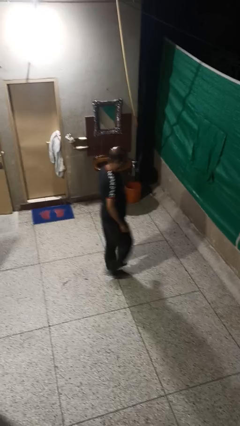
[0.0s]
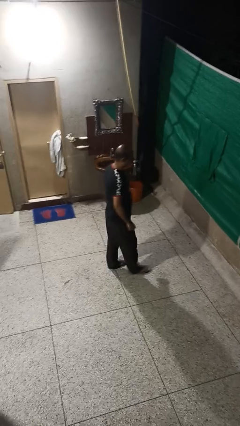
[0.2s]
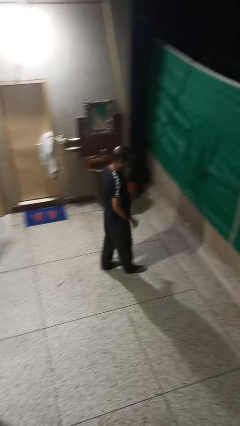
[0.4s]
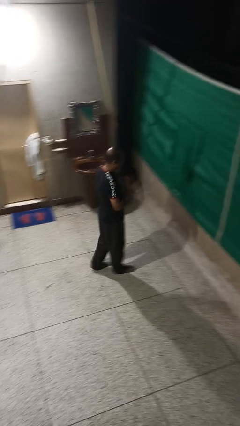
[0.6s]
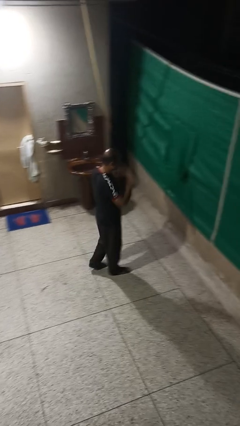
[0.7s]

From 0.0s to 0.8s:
person rubs eyes

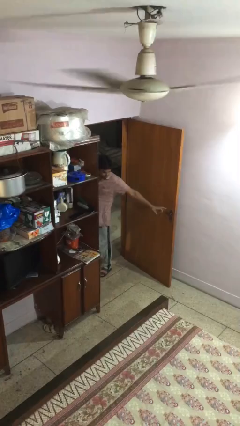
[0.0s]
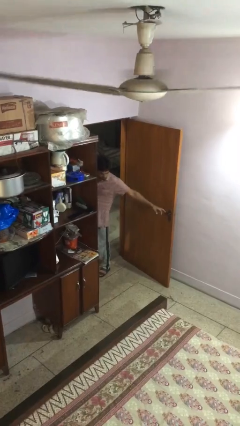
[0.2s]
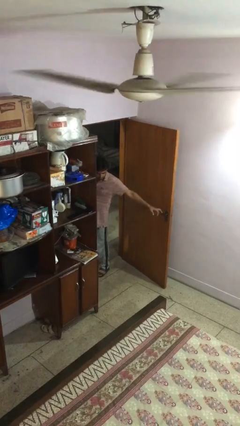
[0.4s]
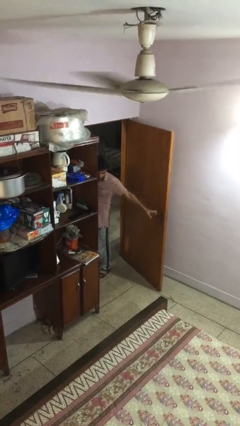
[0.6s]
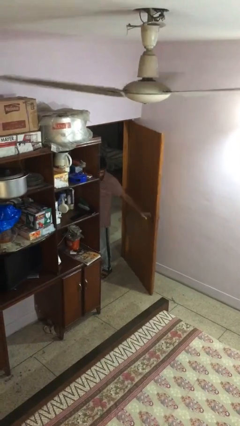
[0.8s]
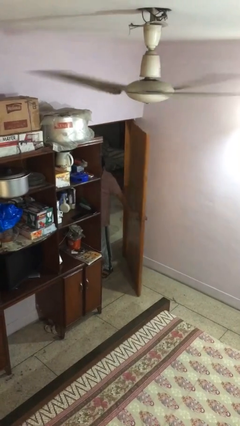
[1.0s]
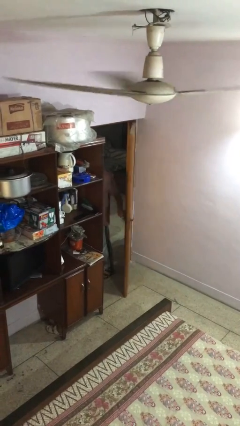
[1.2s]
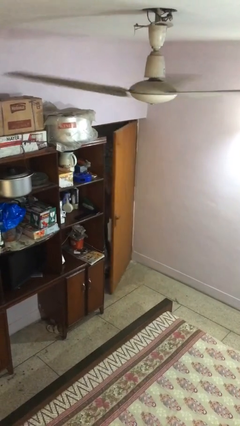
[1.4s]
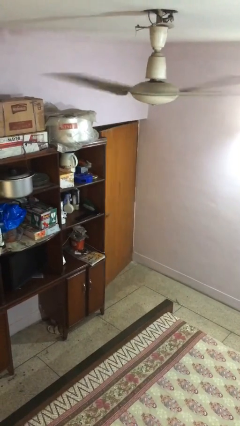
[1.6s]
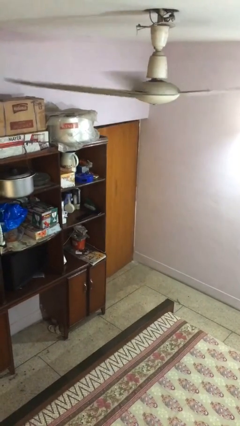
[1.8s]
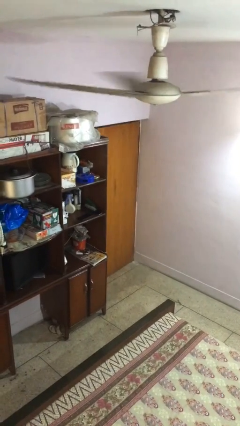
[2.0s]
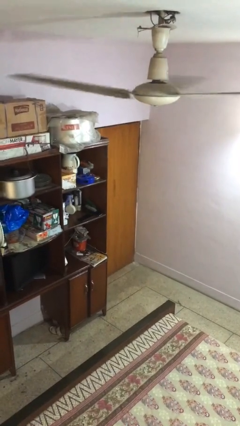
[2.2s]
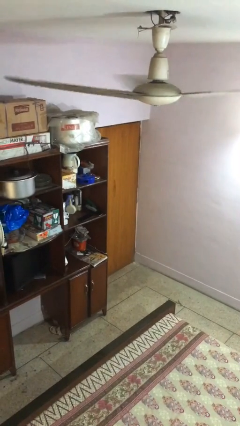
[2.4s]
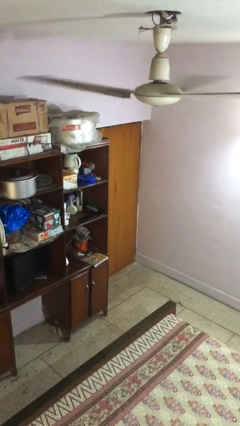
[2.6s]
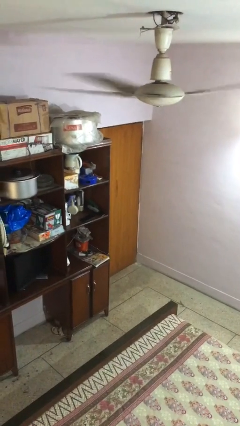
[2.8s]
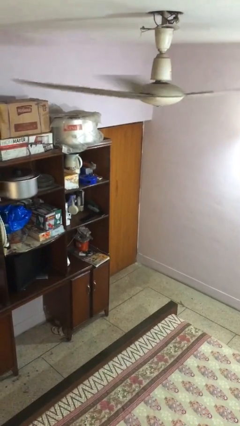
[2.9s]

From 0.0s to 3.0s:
person closes facility door

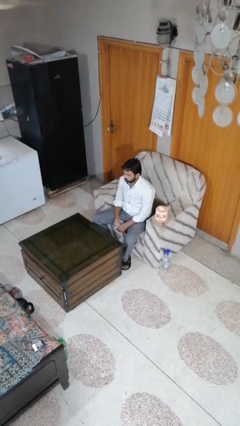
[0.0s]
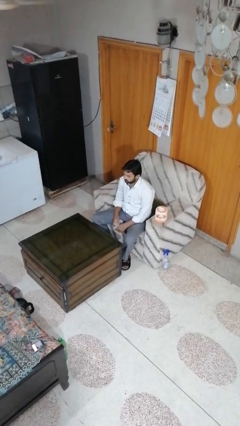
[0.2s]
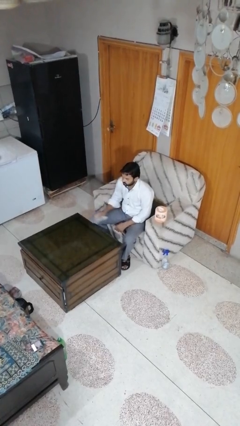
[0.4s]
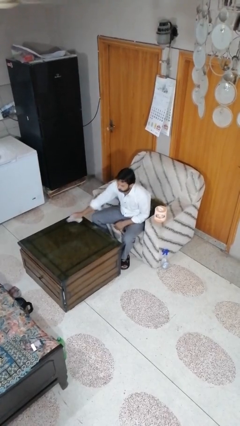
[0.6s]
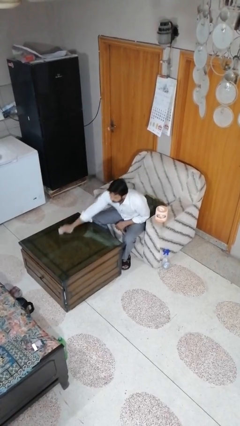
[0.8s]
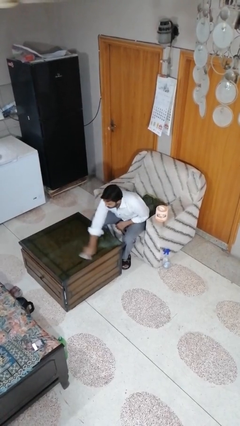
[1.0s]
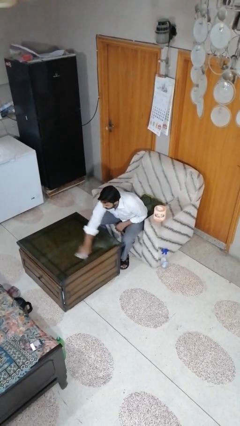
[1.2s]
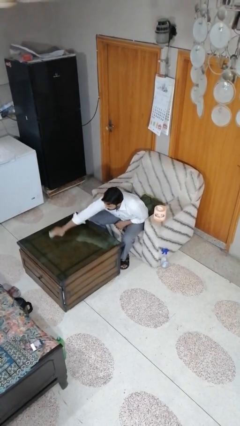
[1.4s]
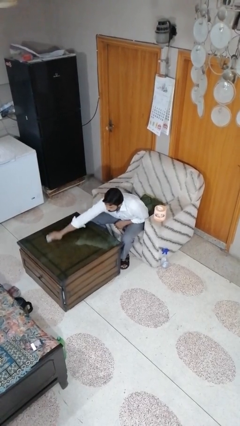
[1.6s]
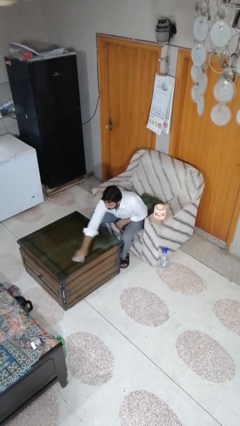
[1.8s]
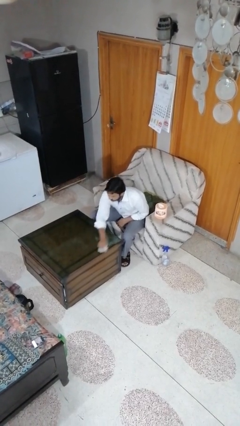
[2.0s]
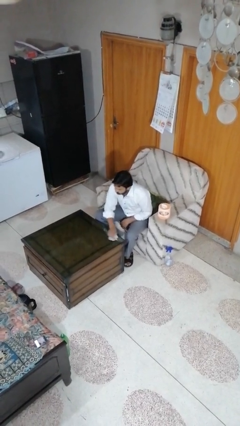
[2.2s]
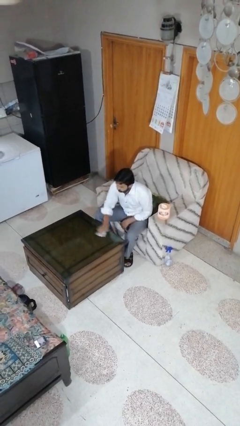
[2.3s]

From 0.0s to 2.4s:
person cleans table with rag

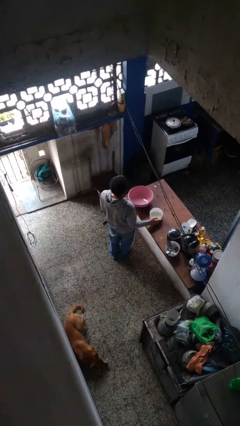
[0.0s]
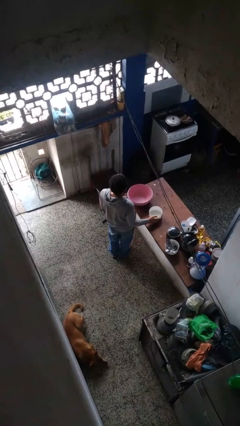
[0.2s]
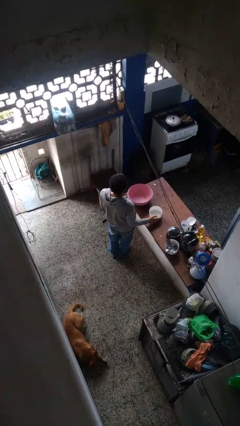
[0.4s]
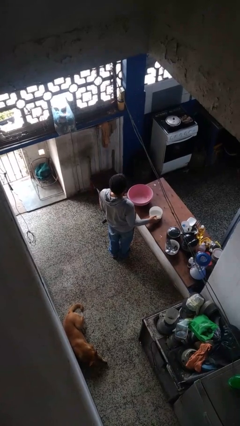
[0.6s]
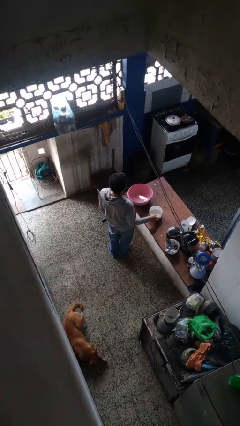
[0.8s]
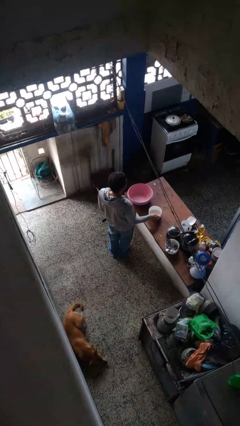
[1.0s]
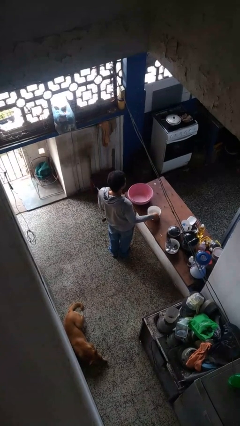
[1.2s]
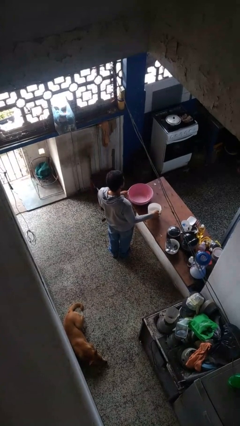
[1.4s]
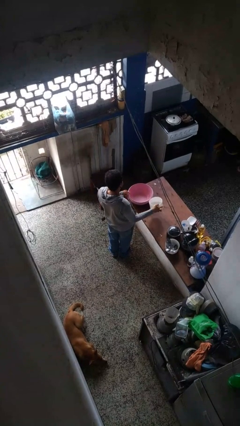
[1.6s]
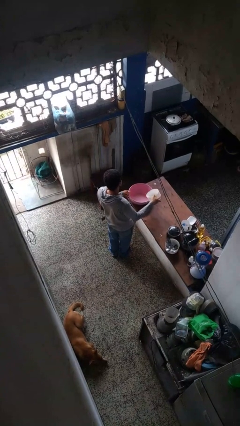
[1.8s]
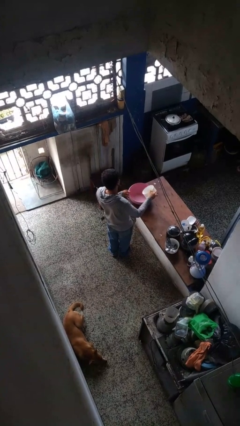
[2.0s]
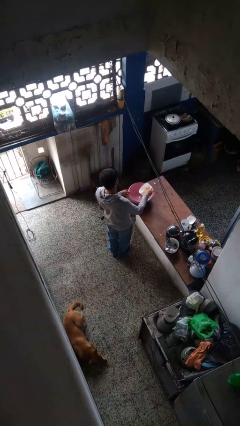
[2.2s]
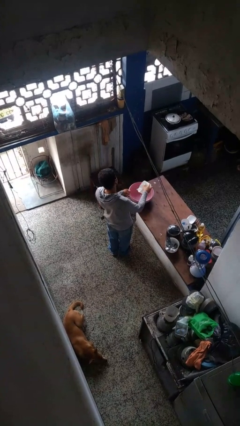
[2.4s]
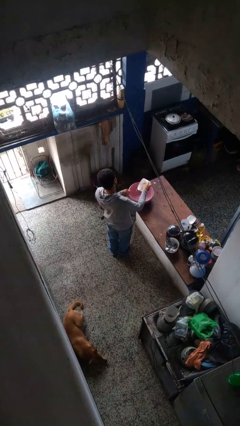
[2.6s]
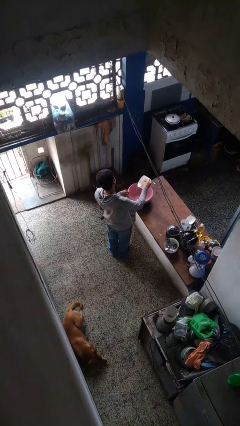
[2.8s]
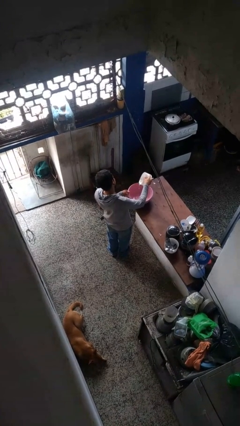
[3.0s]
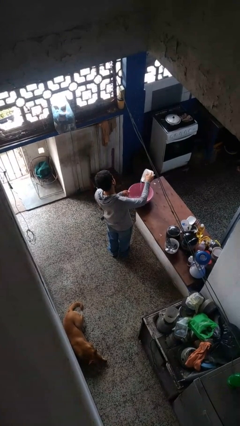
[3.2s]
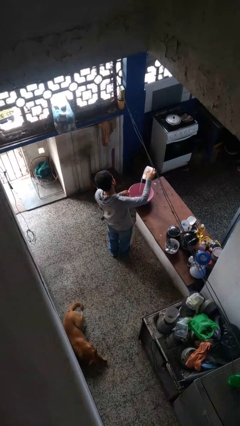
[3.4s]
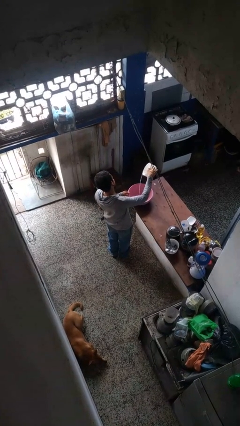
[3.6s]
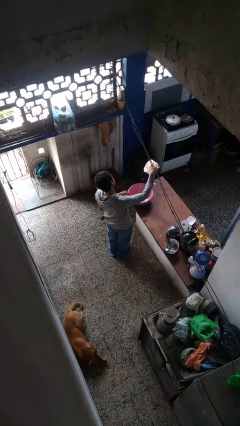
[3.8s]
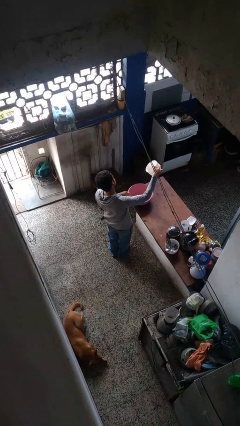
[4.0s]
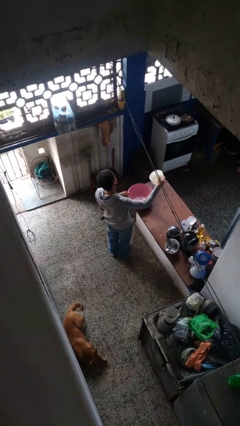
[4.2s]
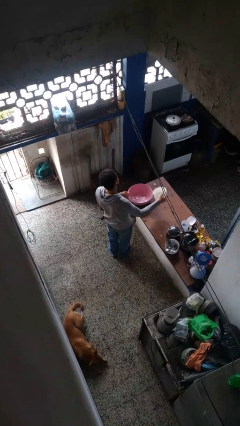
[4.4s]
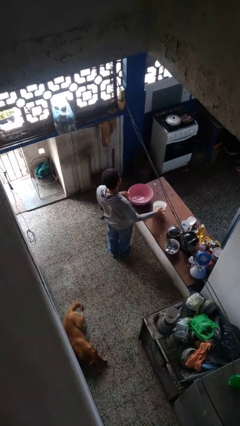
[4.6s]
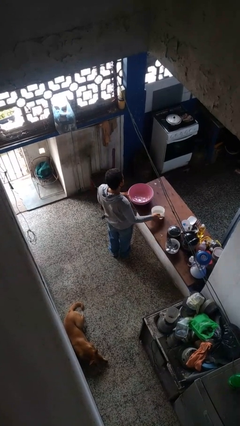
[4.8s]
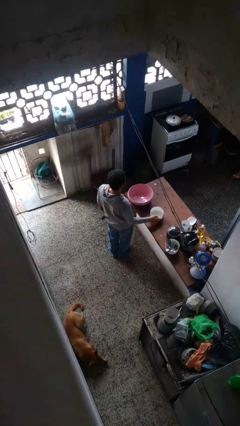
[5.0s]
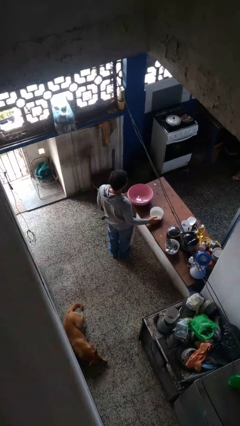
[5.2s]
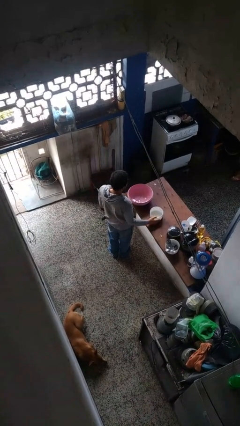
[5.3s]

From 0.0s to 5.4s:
person pours into bowl

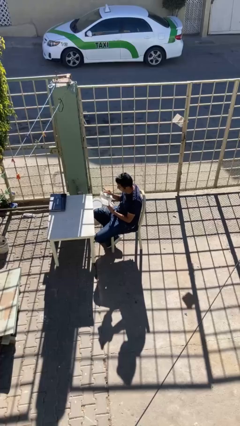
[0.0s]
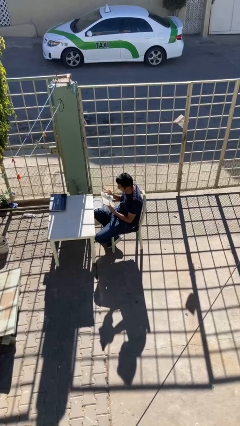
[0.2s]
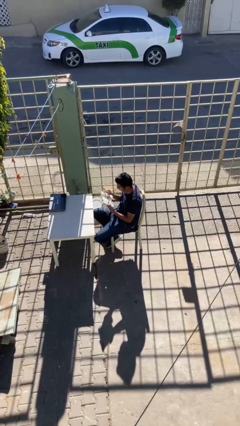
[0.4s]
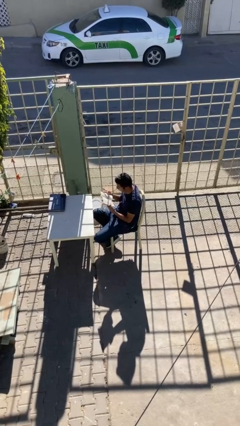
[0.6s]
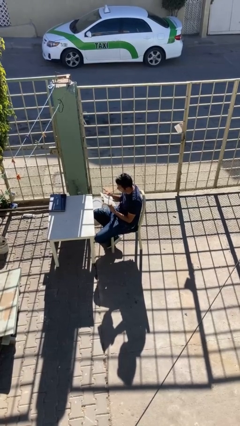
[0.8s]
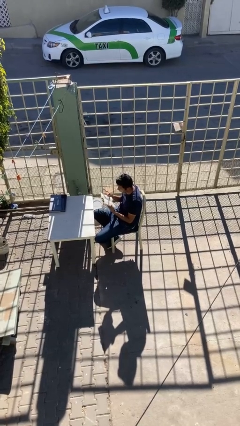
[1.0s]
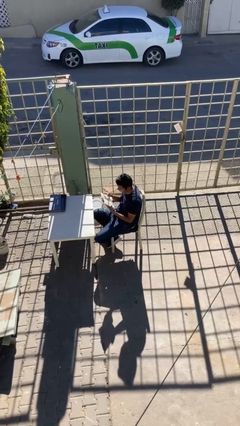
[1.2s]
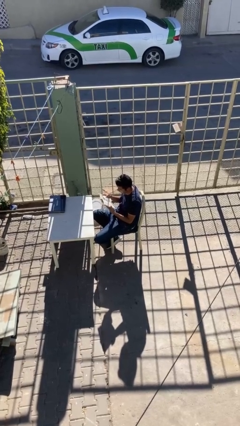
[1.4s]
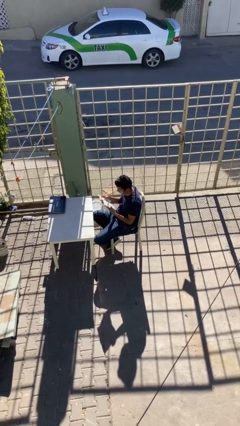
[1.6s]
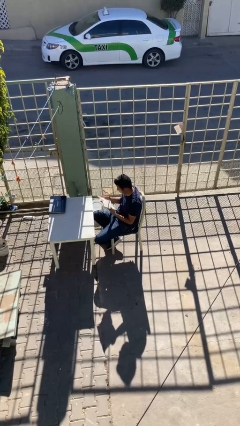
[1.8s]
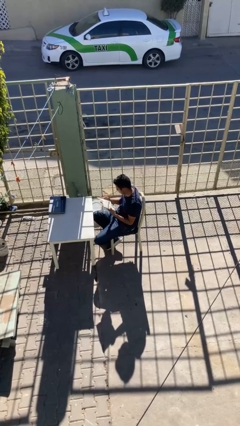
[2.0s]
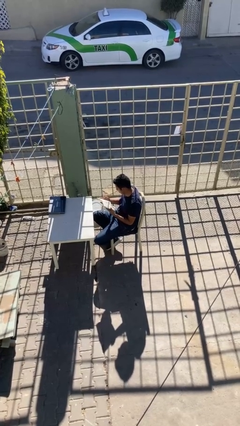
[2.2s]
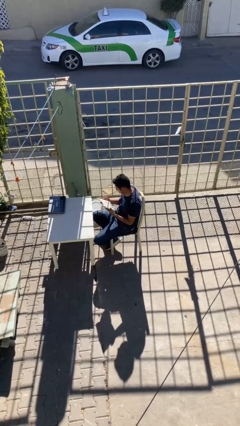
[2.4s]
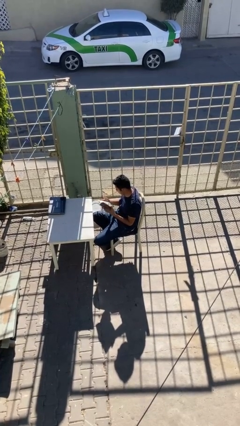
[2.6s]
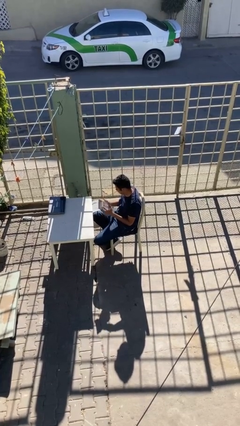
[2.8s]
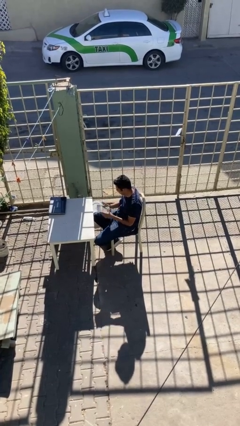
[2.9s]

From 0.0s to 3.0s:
person reads document

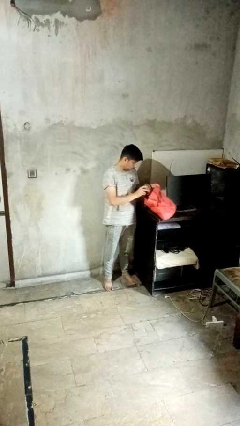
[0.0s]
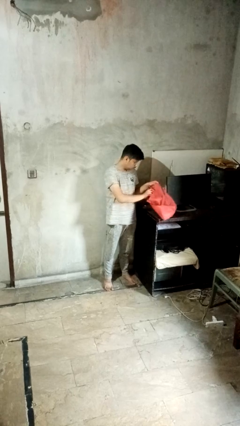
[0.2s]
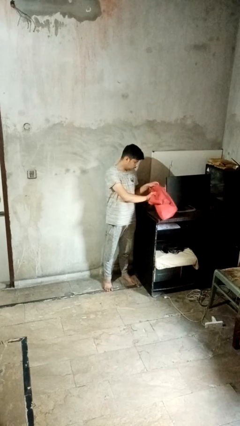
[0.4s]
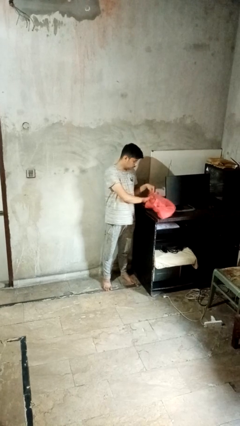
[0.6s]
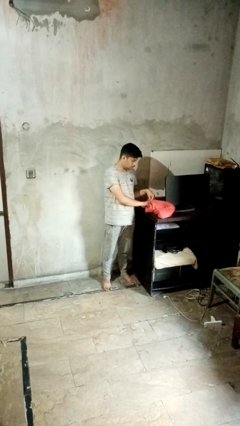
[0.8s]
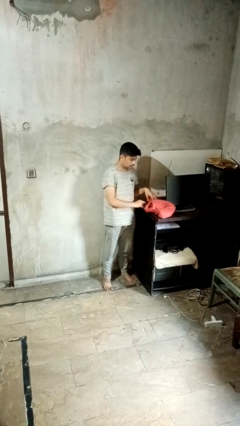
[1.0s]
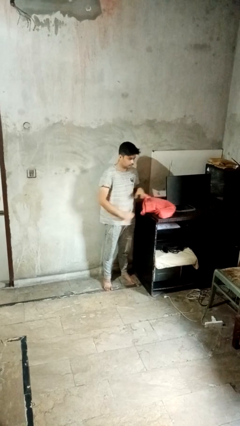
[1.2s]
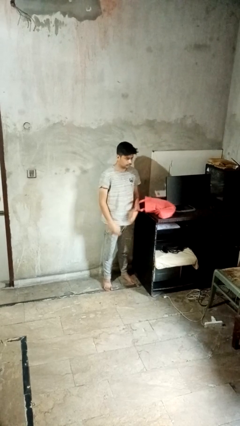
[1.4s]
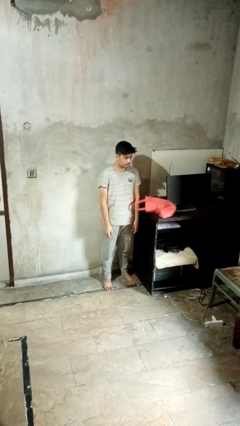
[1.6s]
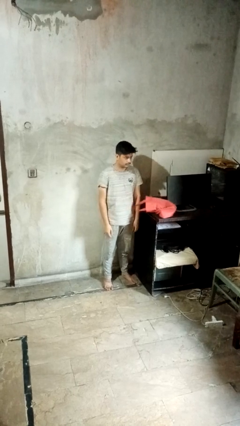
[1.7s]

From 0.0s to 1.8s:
person puts object into bag

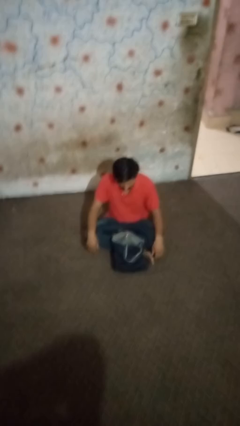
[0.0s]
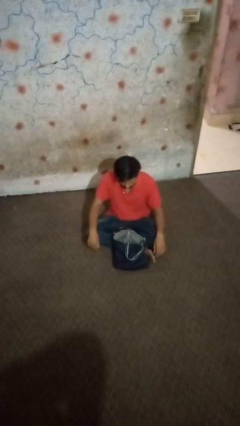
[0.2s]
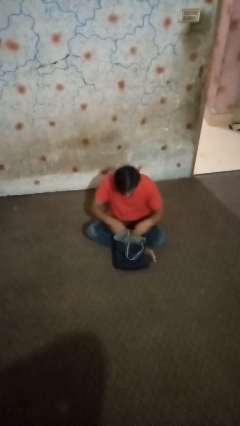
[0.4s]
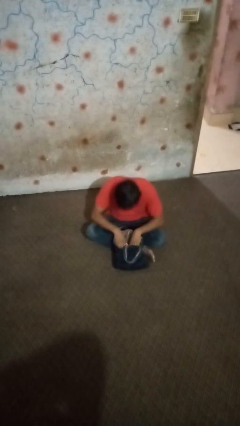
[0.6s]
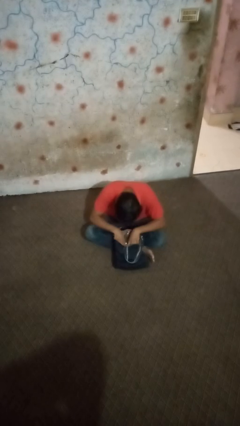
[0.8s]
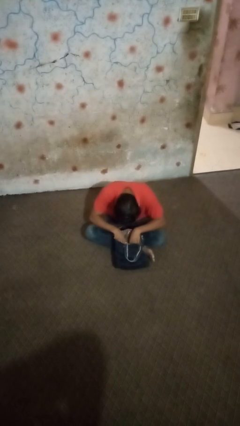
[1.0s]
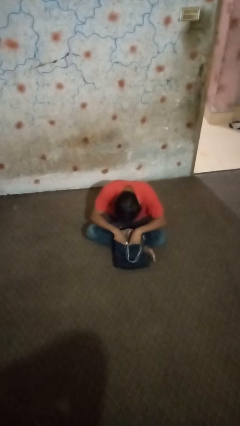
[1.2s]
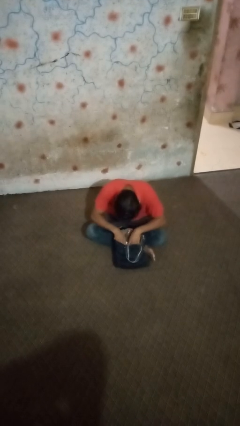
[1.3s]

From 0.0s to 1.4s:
person searches in bag
